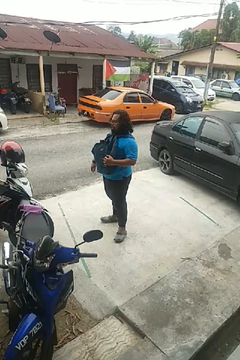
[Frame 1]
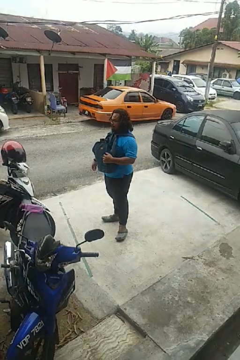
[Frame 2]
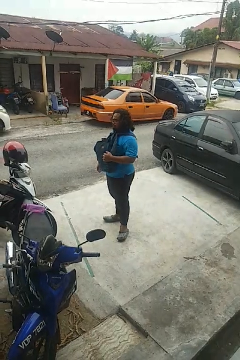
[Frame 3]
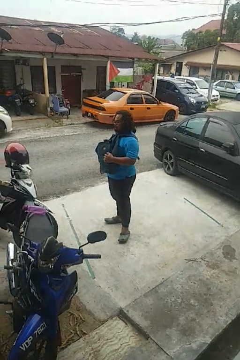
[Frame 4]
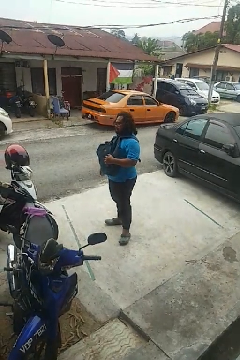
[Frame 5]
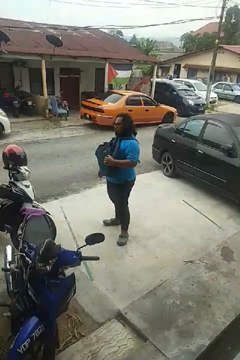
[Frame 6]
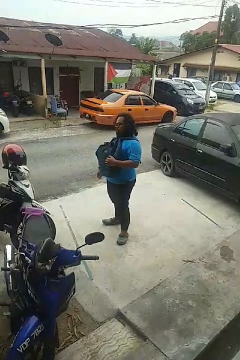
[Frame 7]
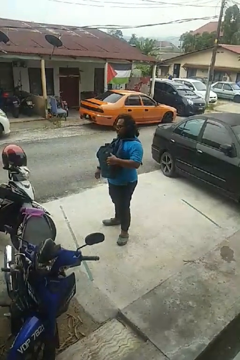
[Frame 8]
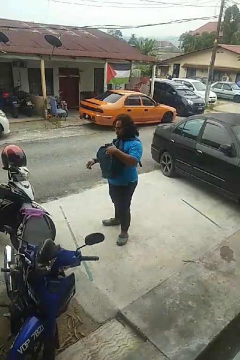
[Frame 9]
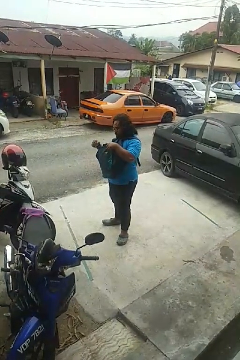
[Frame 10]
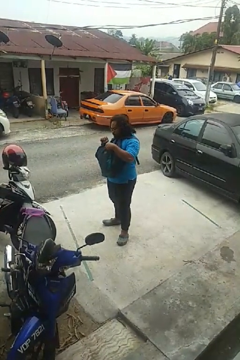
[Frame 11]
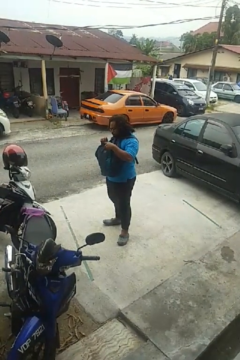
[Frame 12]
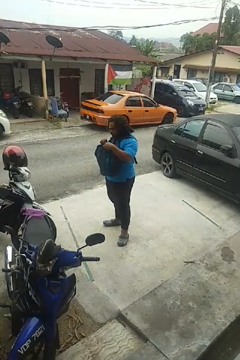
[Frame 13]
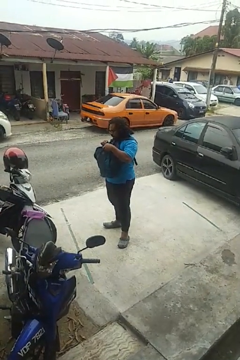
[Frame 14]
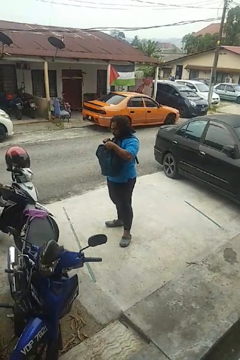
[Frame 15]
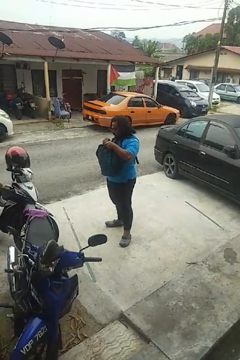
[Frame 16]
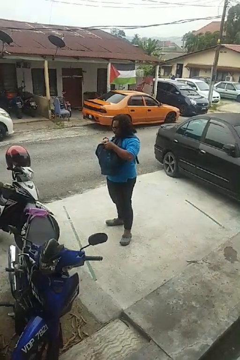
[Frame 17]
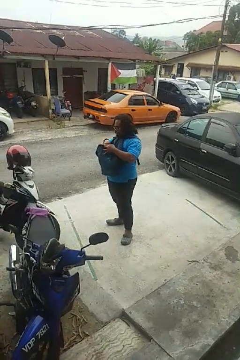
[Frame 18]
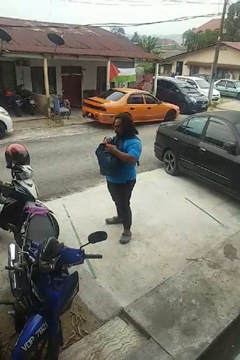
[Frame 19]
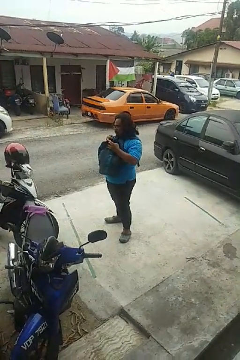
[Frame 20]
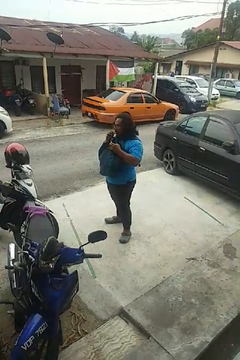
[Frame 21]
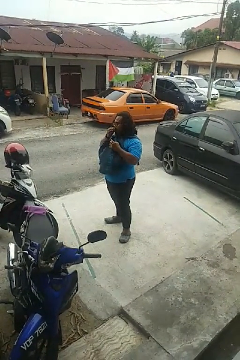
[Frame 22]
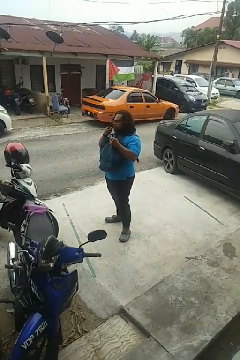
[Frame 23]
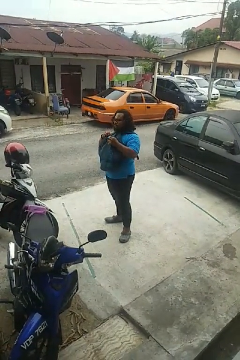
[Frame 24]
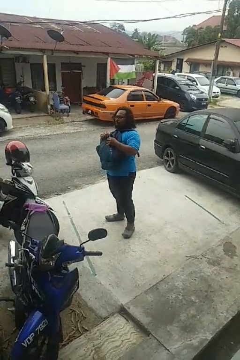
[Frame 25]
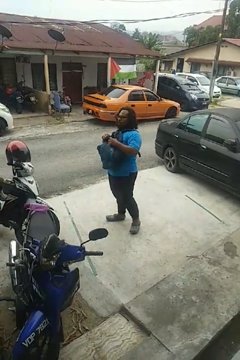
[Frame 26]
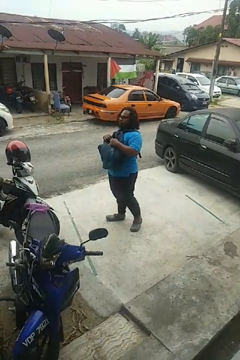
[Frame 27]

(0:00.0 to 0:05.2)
person eats snack from bag

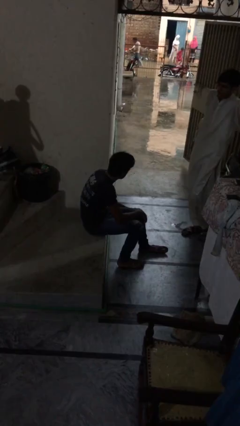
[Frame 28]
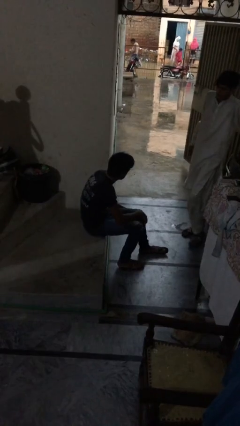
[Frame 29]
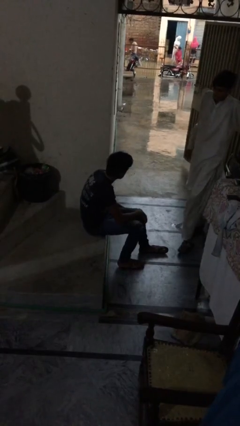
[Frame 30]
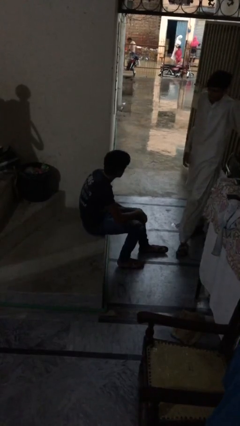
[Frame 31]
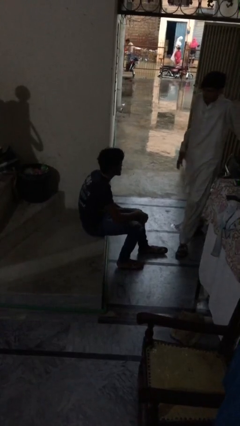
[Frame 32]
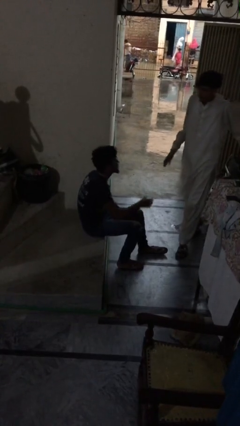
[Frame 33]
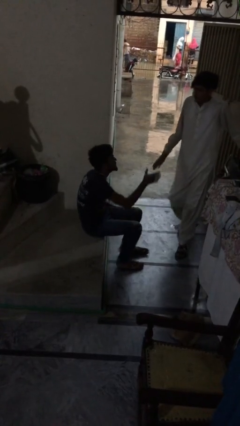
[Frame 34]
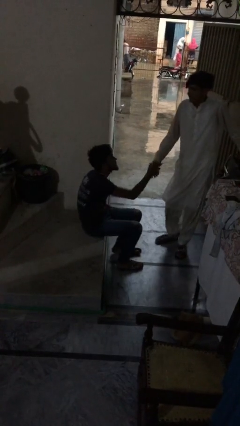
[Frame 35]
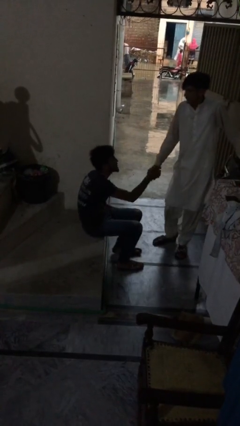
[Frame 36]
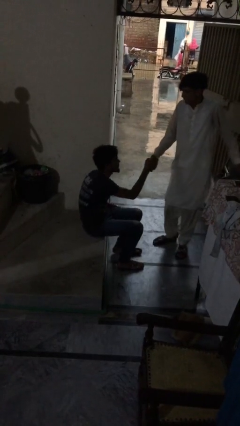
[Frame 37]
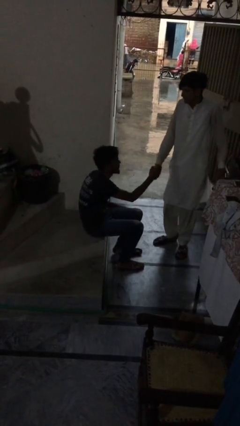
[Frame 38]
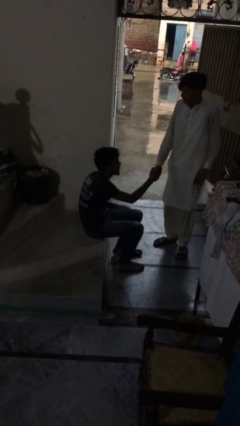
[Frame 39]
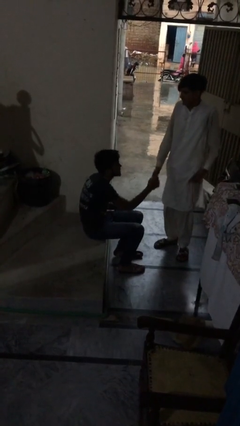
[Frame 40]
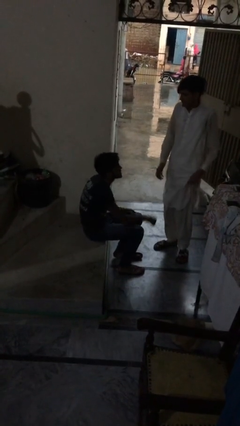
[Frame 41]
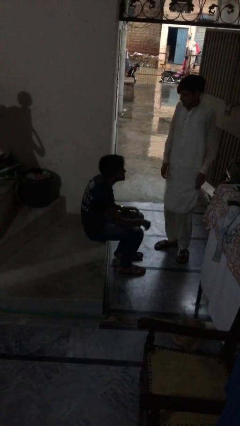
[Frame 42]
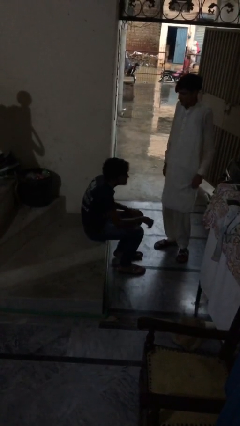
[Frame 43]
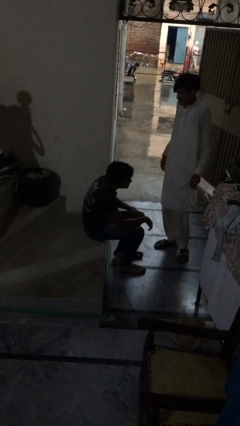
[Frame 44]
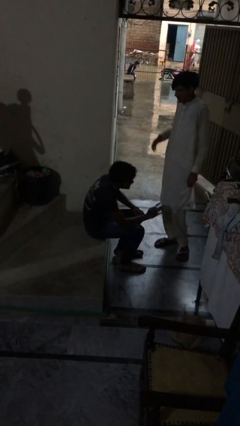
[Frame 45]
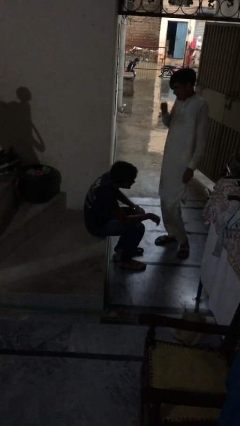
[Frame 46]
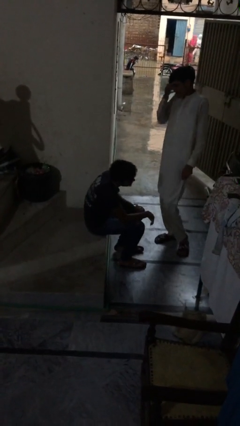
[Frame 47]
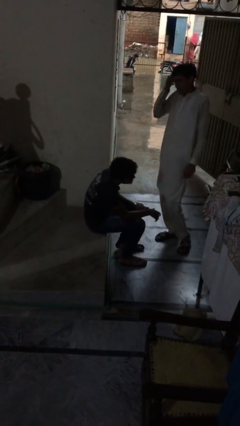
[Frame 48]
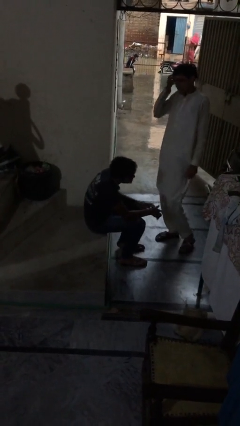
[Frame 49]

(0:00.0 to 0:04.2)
person shakes hand

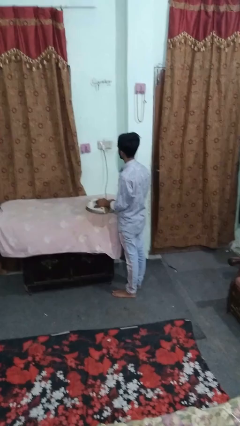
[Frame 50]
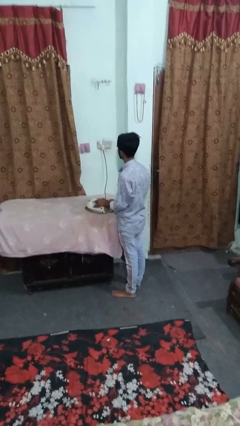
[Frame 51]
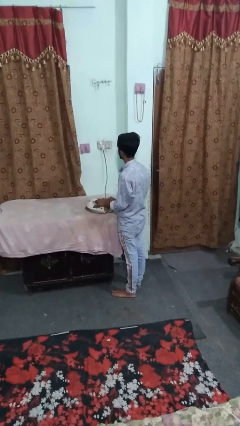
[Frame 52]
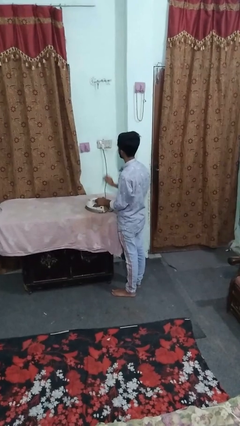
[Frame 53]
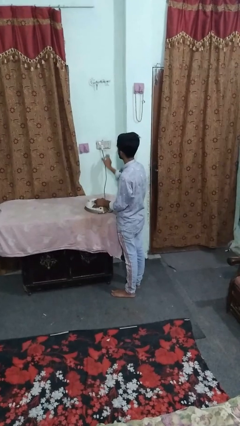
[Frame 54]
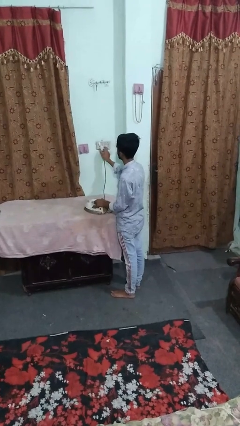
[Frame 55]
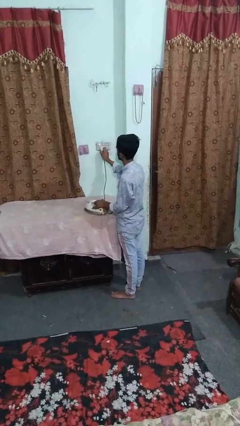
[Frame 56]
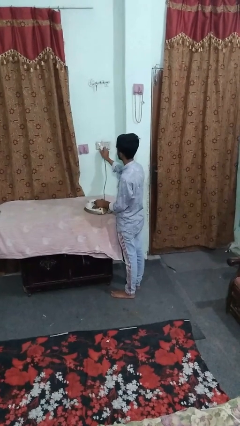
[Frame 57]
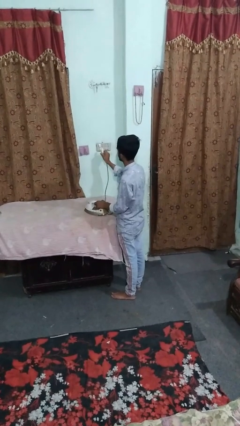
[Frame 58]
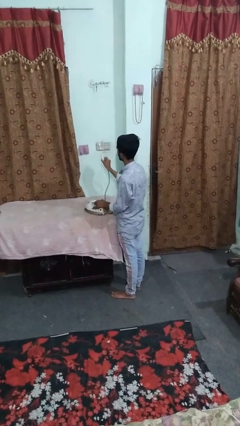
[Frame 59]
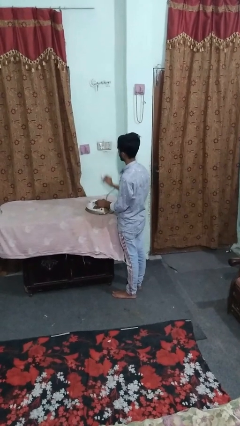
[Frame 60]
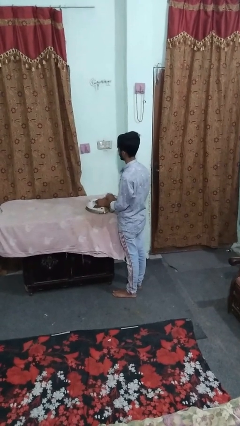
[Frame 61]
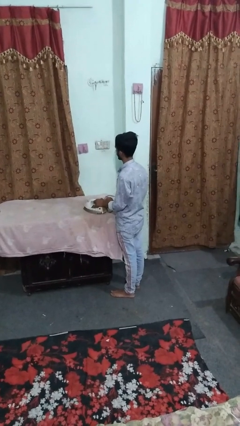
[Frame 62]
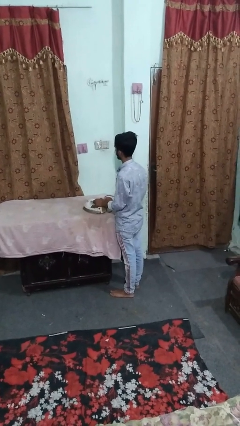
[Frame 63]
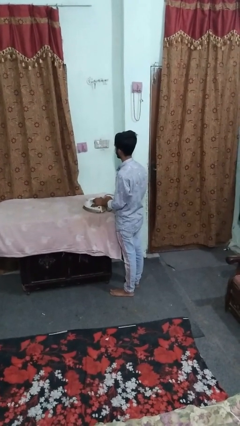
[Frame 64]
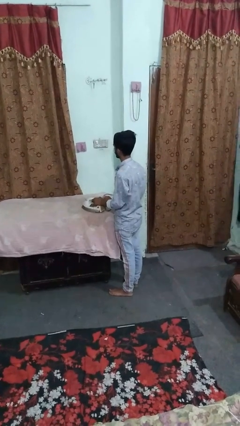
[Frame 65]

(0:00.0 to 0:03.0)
person unplugs from electrical socket

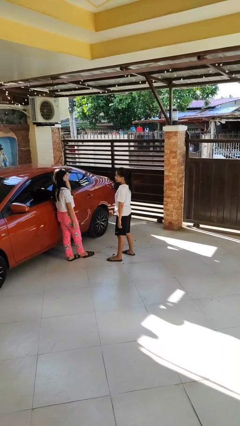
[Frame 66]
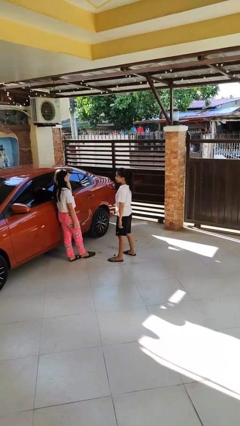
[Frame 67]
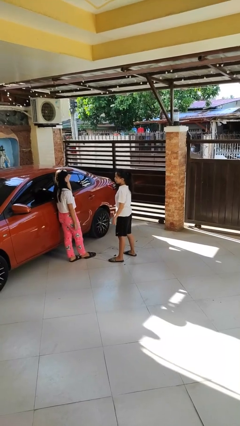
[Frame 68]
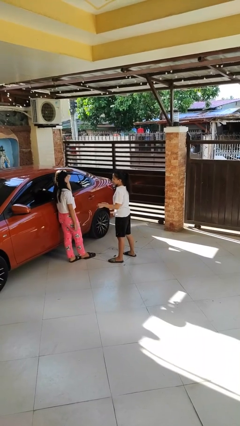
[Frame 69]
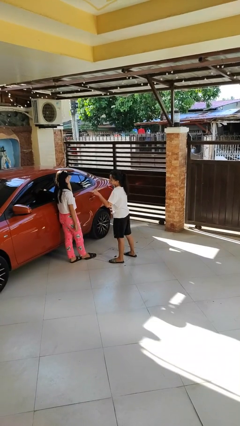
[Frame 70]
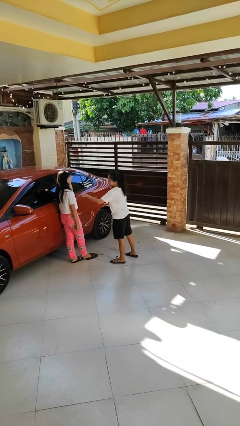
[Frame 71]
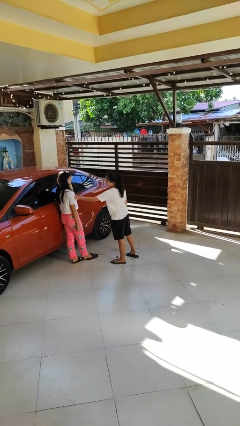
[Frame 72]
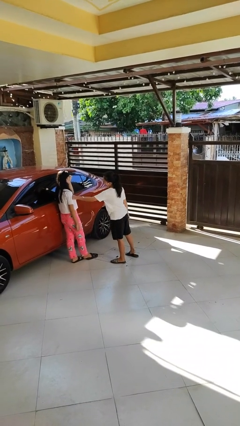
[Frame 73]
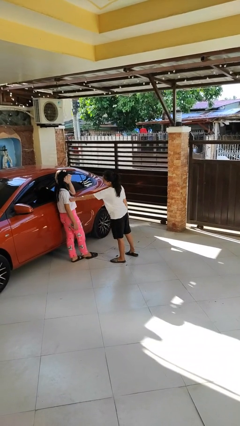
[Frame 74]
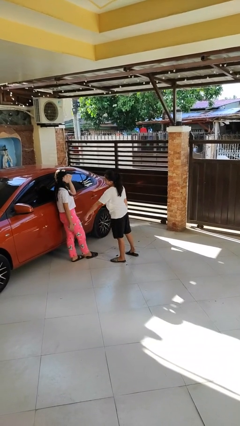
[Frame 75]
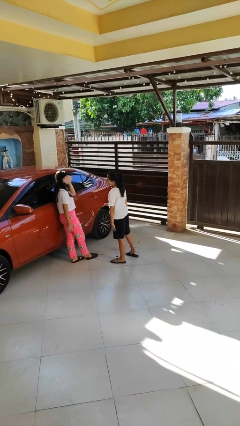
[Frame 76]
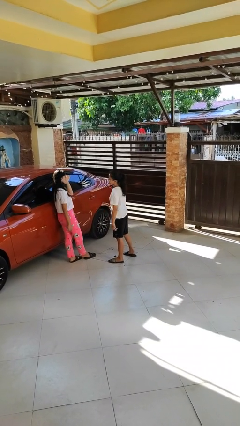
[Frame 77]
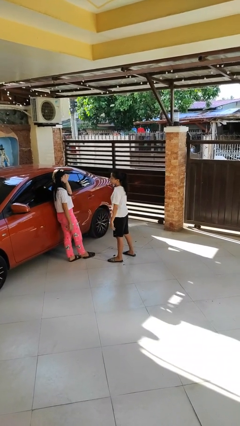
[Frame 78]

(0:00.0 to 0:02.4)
person pounds shoulders of person

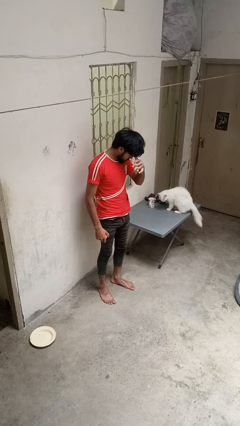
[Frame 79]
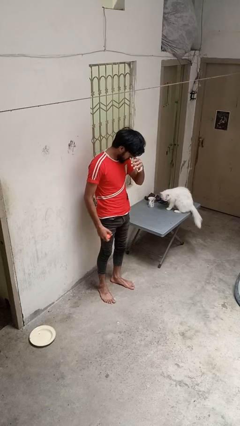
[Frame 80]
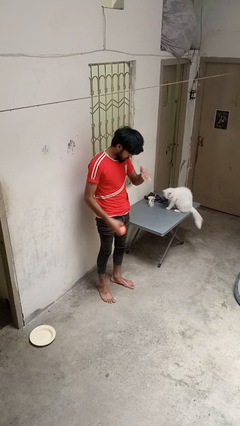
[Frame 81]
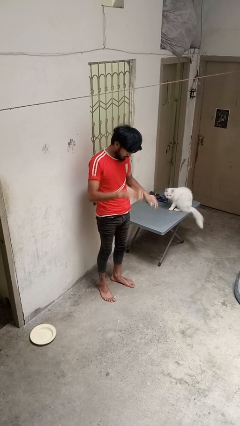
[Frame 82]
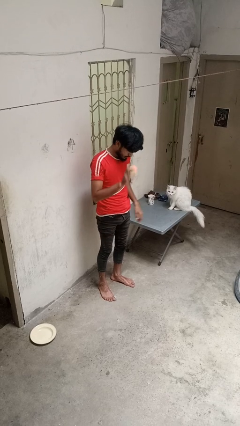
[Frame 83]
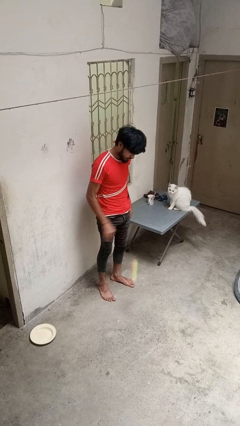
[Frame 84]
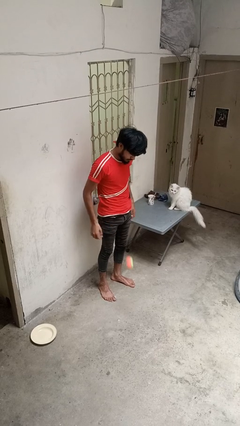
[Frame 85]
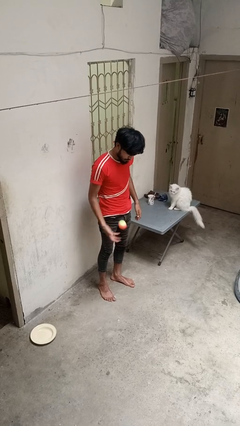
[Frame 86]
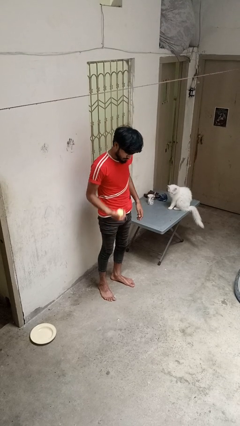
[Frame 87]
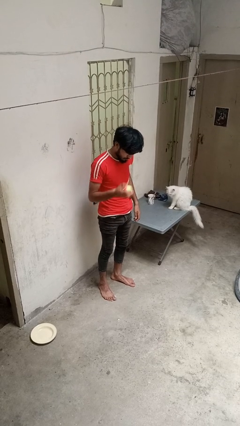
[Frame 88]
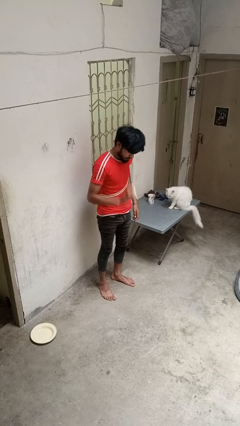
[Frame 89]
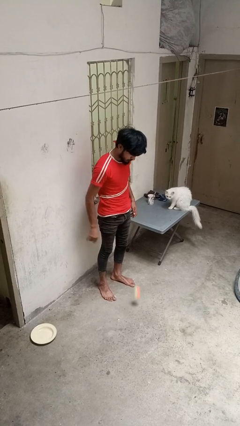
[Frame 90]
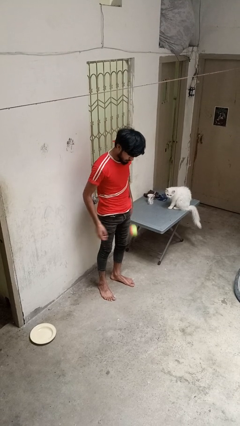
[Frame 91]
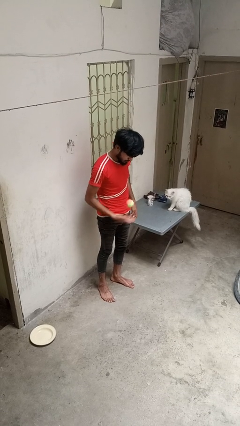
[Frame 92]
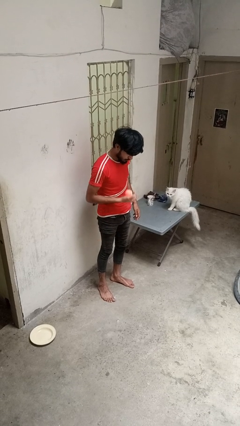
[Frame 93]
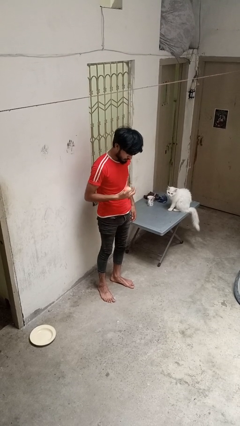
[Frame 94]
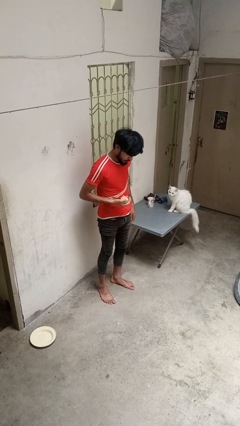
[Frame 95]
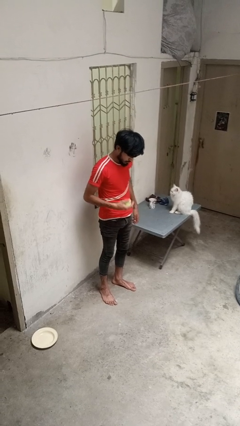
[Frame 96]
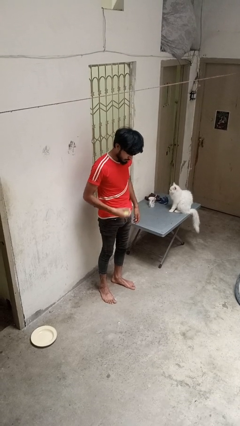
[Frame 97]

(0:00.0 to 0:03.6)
person bounces ball on floor
